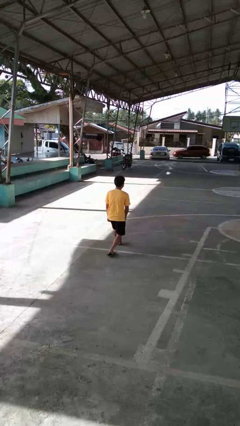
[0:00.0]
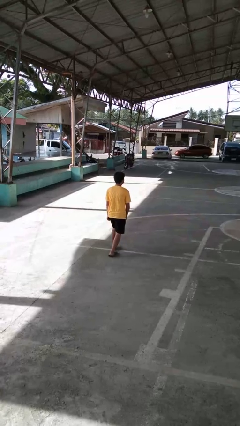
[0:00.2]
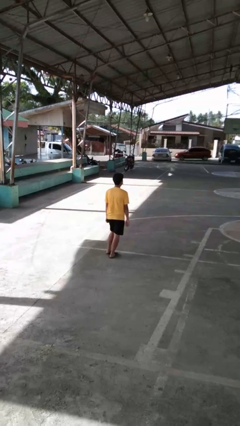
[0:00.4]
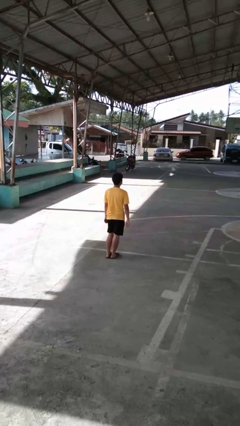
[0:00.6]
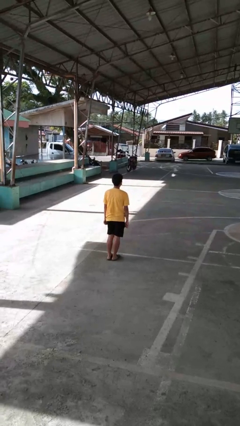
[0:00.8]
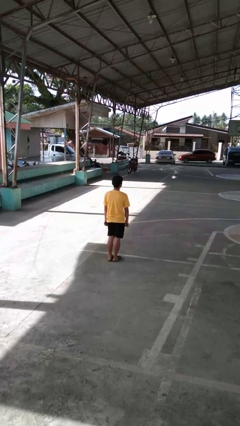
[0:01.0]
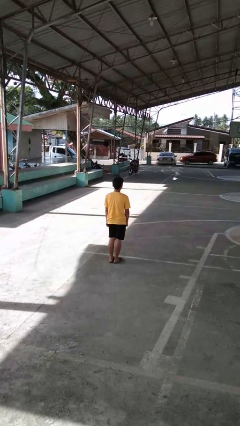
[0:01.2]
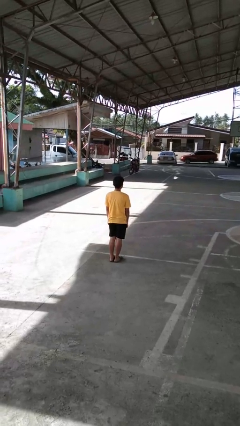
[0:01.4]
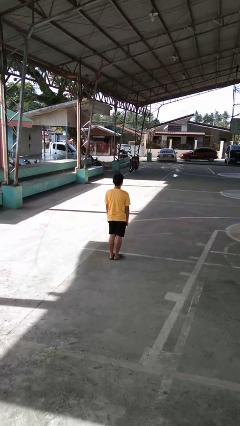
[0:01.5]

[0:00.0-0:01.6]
person stands up from floor

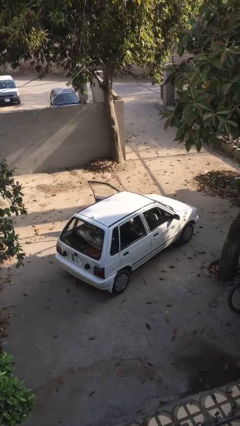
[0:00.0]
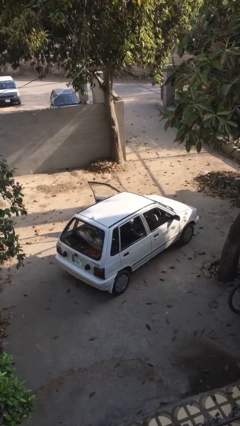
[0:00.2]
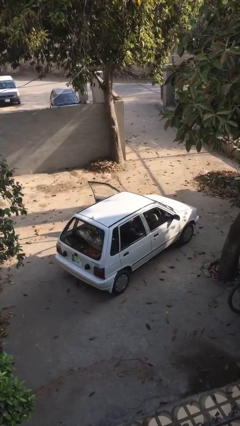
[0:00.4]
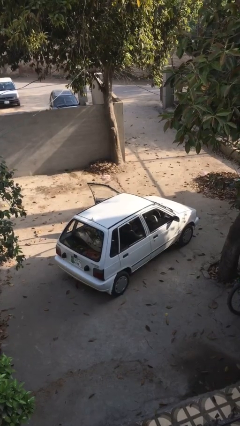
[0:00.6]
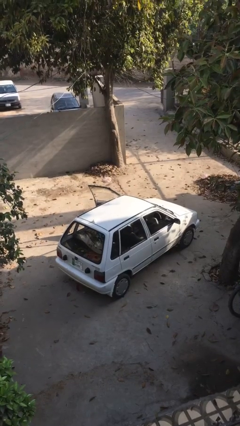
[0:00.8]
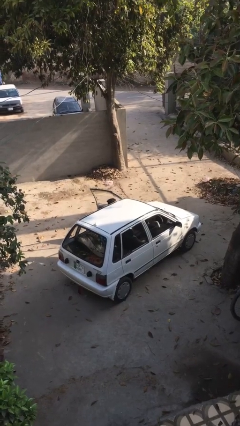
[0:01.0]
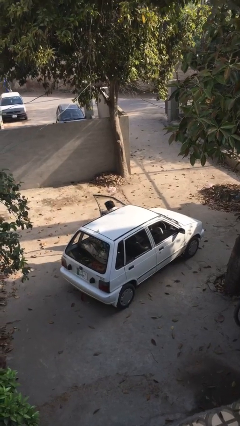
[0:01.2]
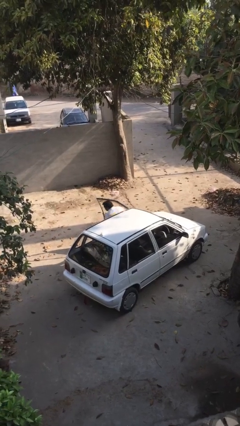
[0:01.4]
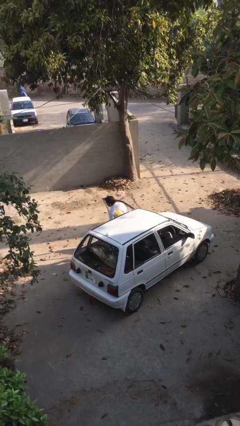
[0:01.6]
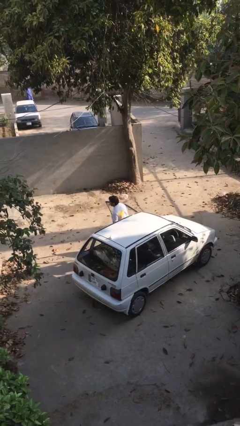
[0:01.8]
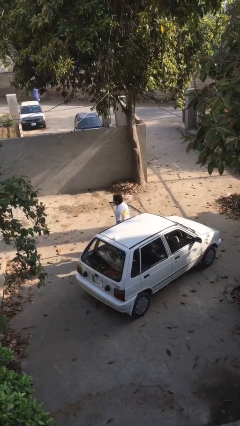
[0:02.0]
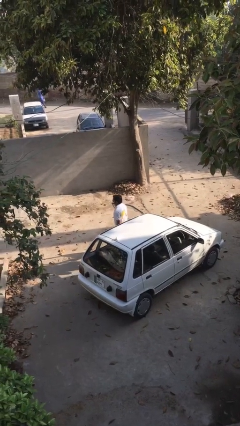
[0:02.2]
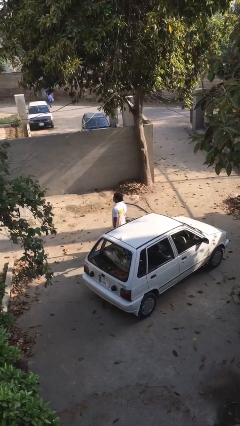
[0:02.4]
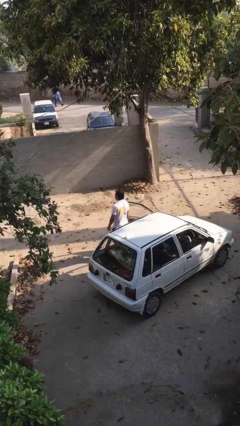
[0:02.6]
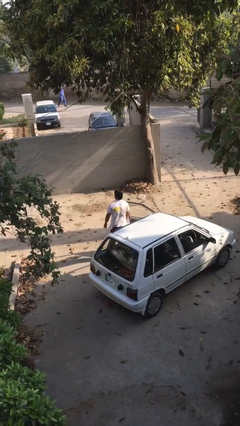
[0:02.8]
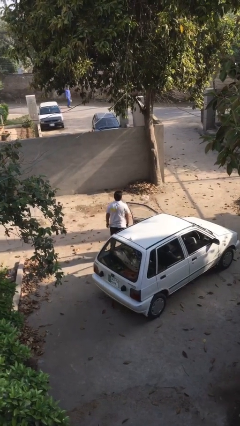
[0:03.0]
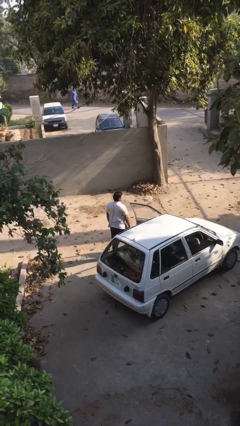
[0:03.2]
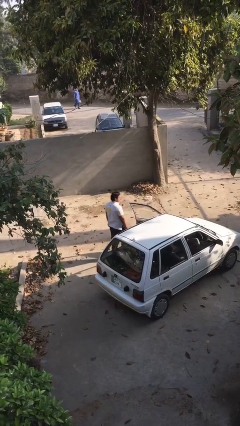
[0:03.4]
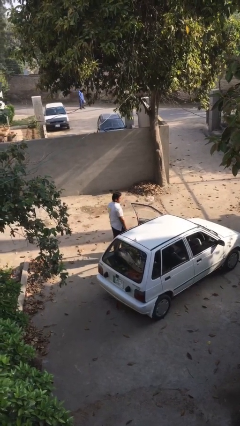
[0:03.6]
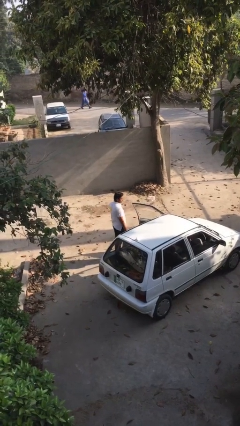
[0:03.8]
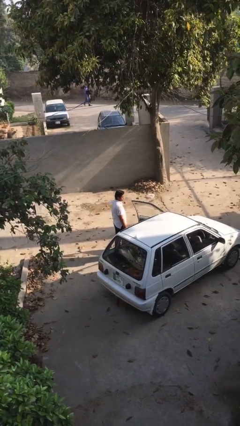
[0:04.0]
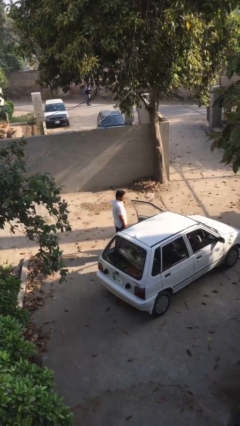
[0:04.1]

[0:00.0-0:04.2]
person exits car

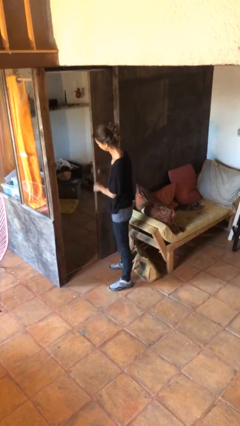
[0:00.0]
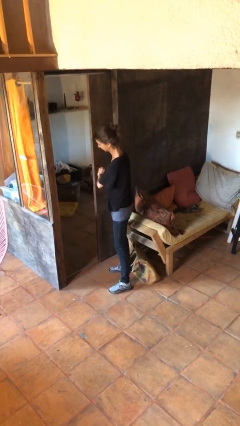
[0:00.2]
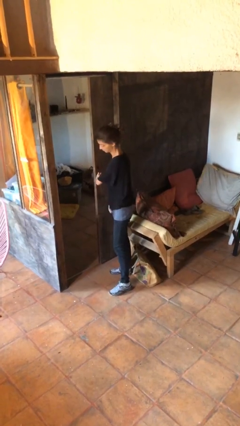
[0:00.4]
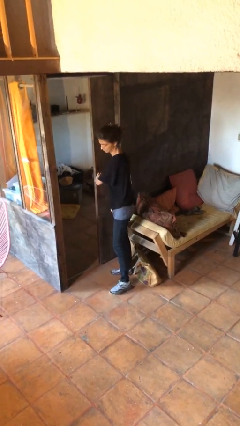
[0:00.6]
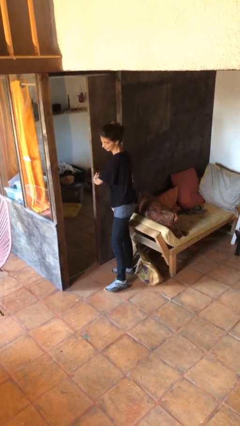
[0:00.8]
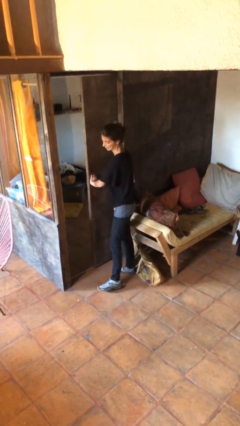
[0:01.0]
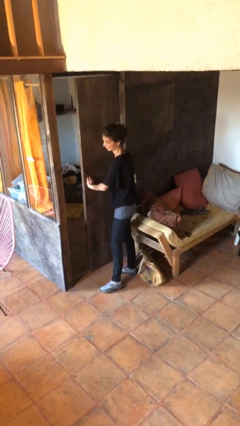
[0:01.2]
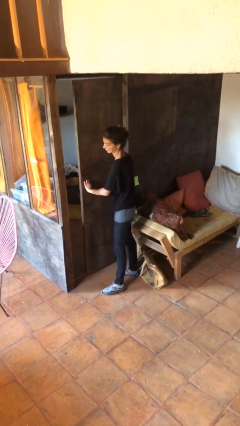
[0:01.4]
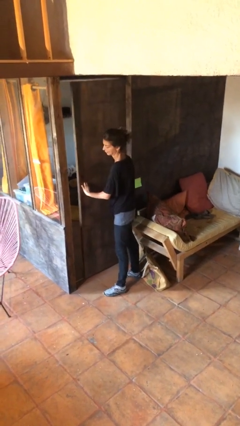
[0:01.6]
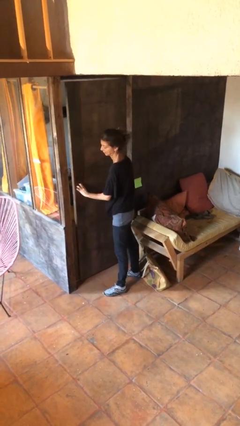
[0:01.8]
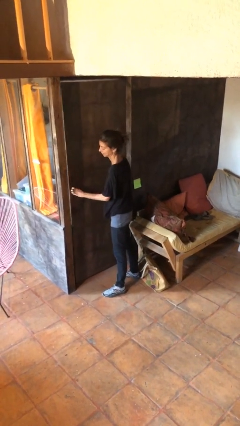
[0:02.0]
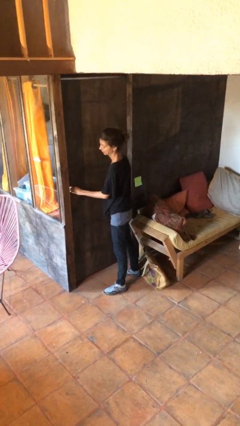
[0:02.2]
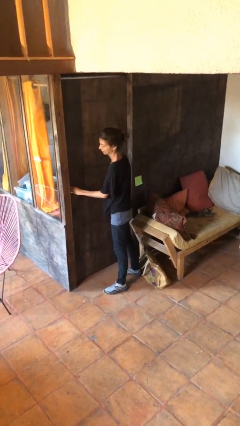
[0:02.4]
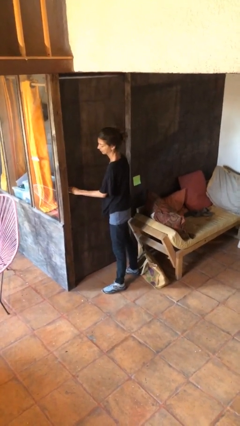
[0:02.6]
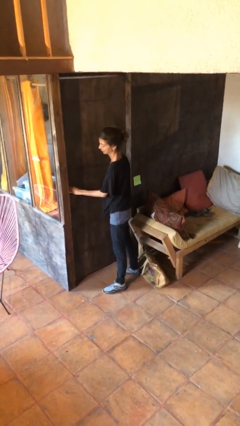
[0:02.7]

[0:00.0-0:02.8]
person closes facility door

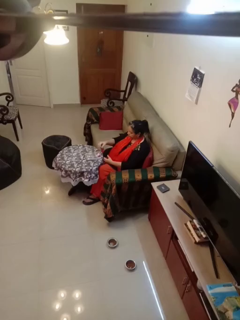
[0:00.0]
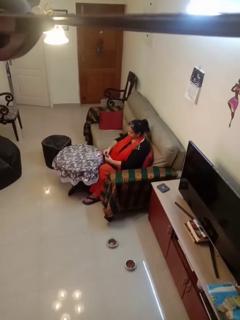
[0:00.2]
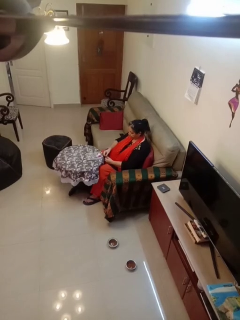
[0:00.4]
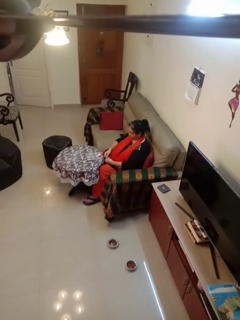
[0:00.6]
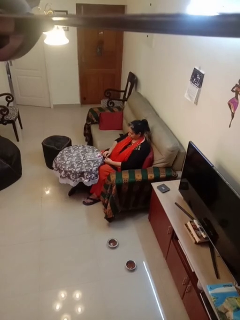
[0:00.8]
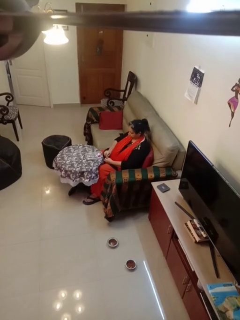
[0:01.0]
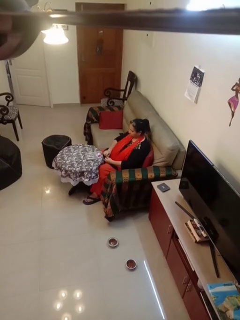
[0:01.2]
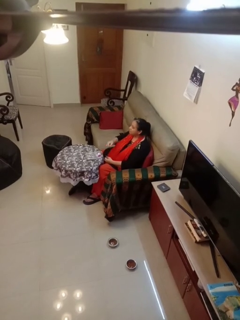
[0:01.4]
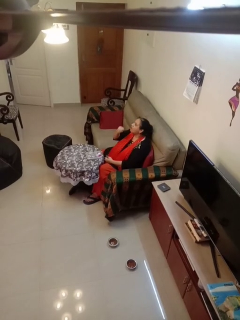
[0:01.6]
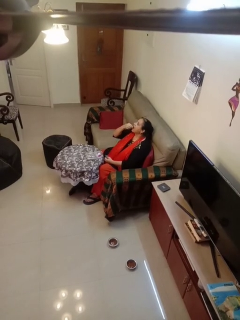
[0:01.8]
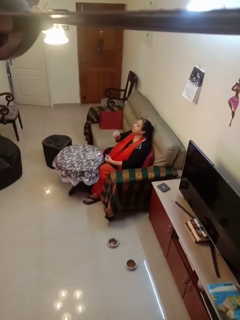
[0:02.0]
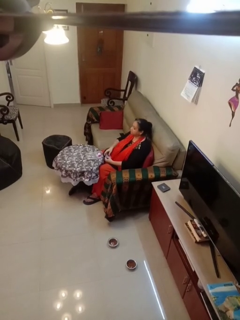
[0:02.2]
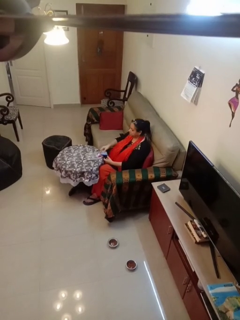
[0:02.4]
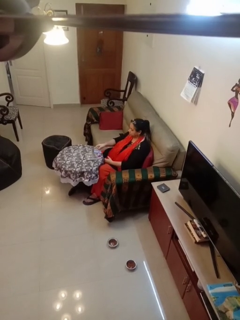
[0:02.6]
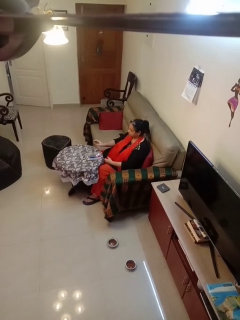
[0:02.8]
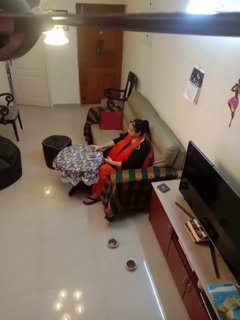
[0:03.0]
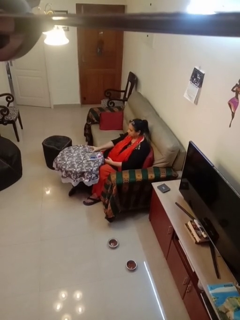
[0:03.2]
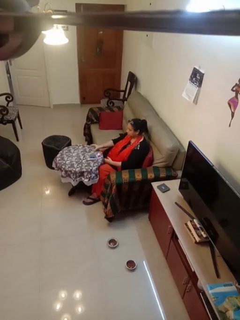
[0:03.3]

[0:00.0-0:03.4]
person takes medicine pills

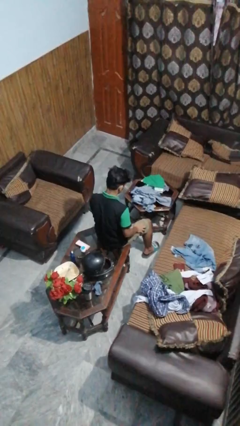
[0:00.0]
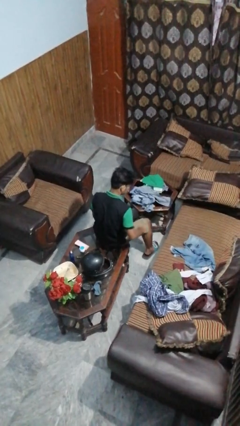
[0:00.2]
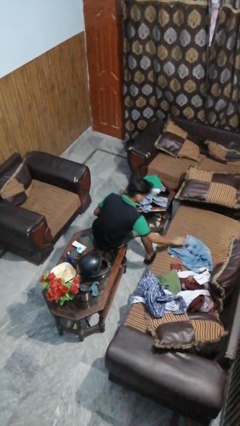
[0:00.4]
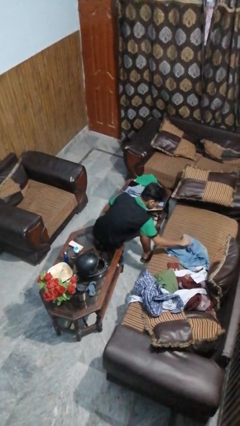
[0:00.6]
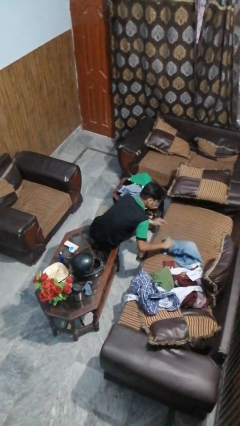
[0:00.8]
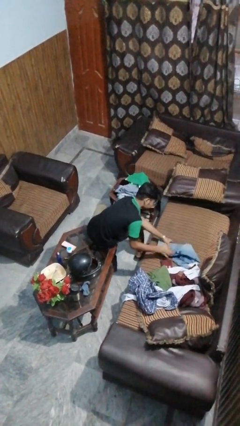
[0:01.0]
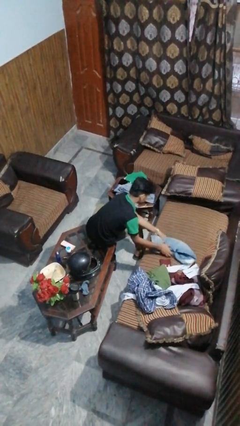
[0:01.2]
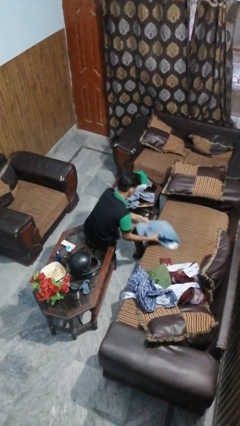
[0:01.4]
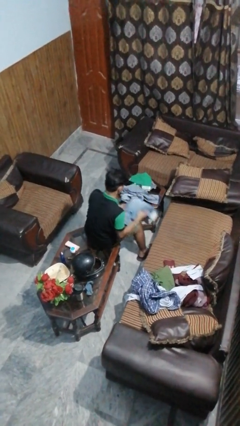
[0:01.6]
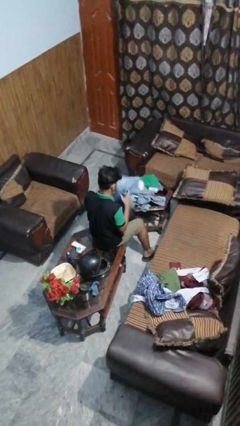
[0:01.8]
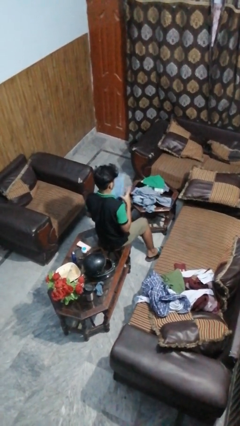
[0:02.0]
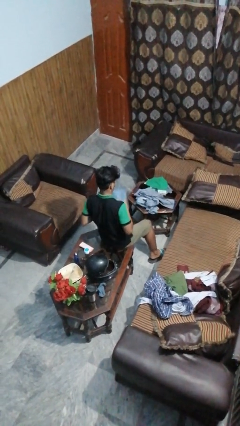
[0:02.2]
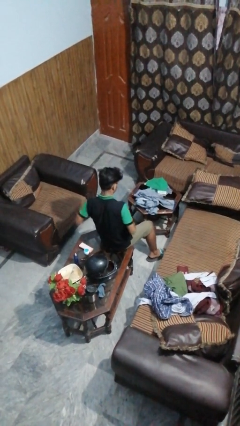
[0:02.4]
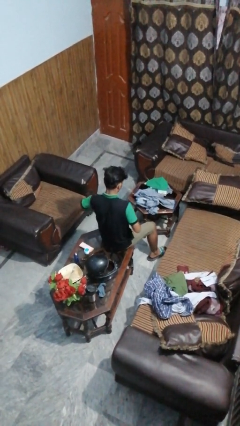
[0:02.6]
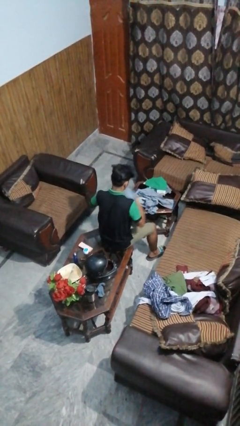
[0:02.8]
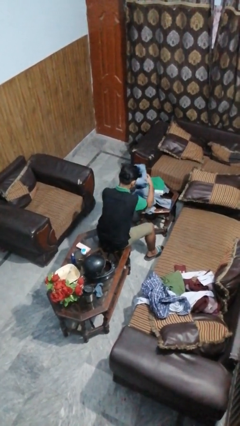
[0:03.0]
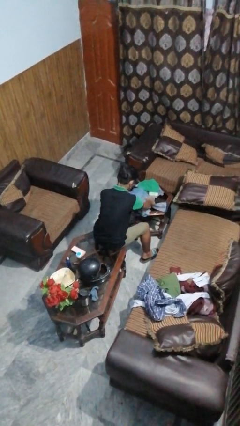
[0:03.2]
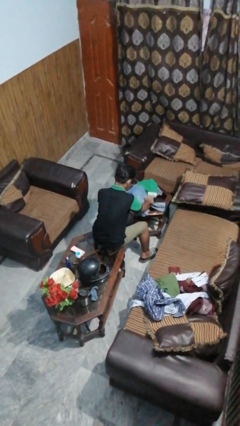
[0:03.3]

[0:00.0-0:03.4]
person folds pants

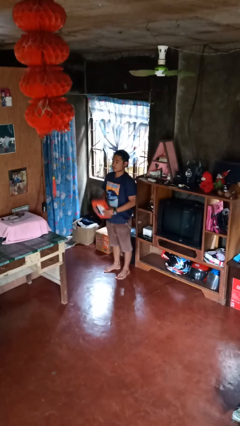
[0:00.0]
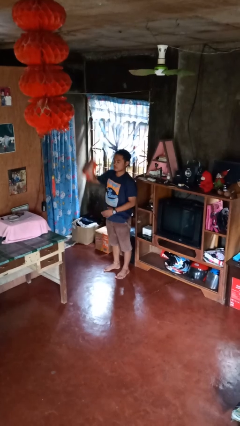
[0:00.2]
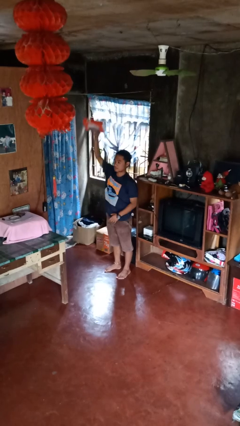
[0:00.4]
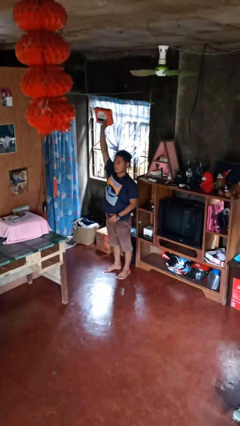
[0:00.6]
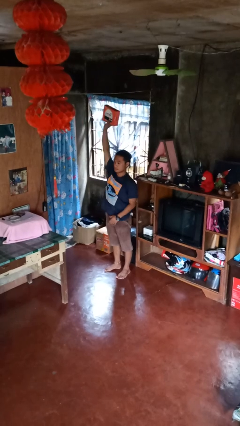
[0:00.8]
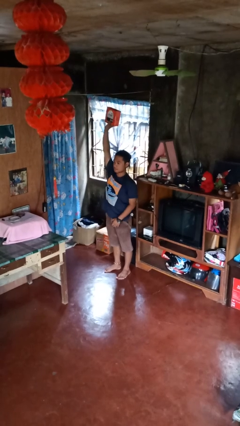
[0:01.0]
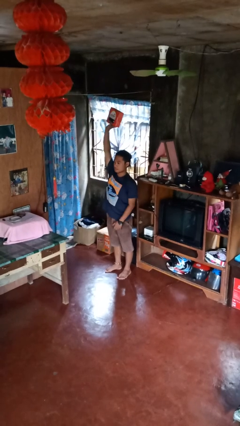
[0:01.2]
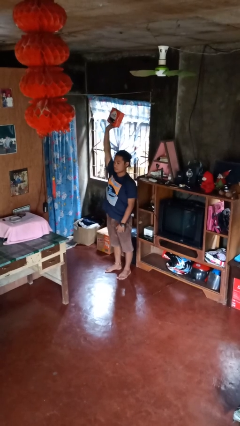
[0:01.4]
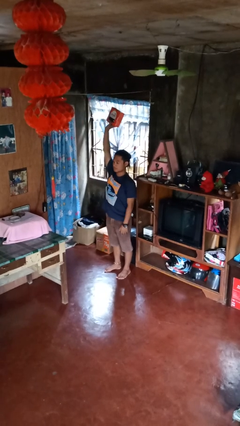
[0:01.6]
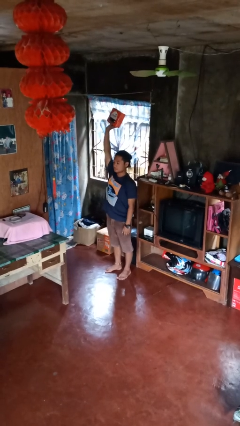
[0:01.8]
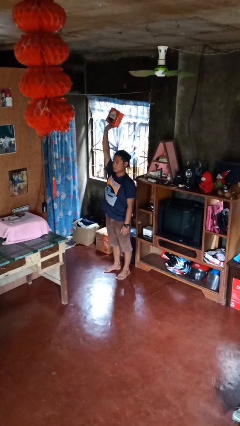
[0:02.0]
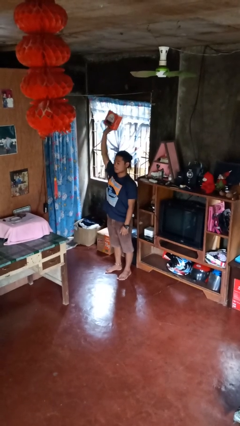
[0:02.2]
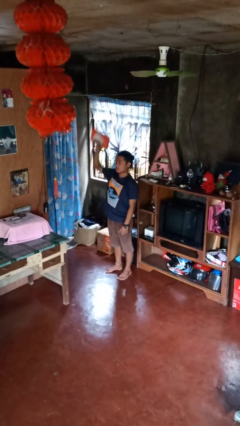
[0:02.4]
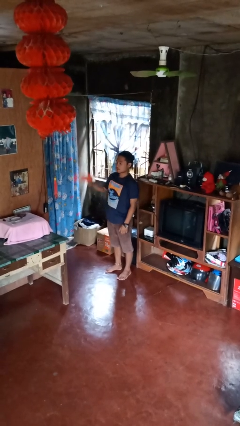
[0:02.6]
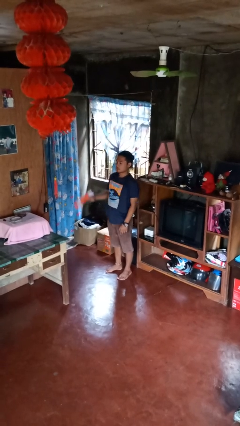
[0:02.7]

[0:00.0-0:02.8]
person holds object above head
